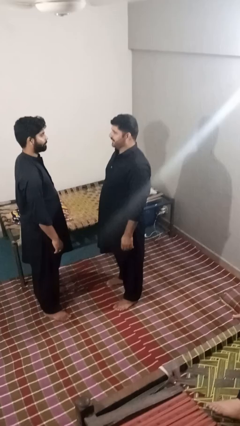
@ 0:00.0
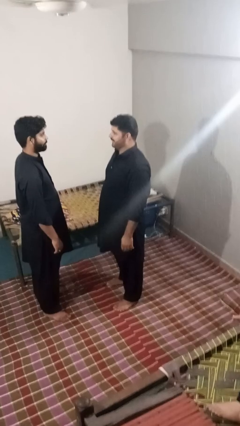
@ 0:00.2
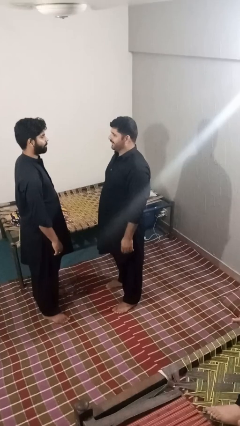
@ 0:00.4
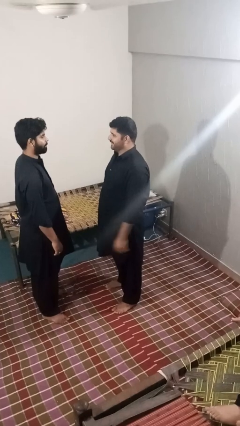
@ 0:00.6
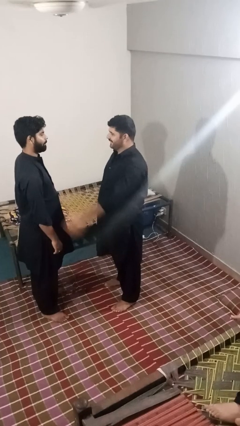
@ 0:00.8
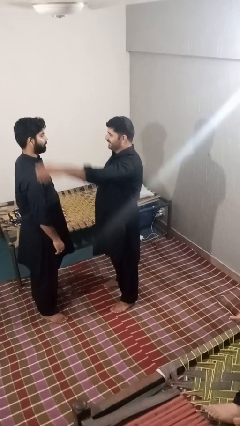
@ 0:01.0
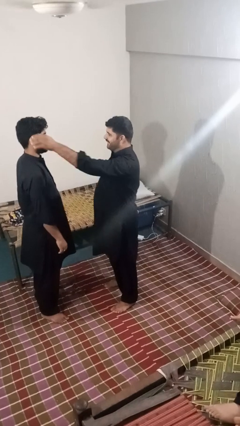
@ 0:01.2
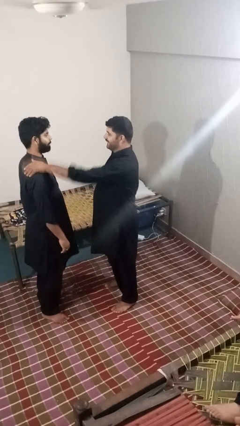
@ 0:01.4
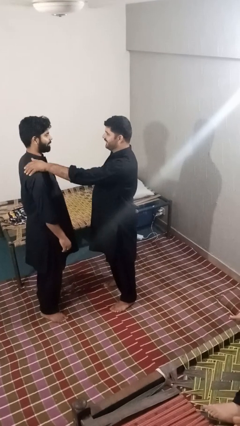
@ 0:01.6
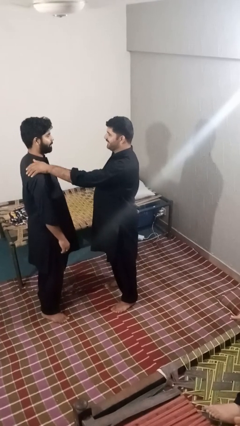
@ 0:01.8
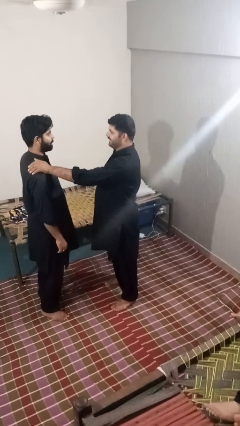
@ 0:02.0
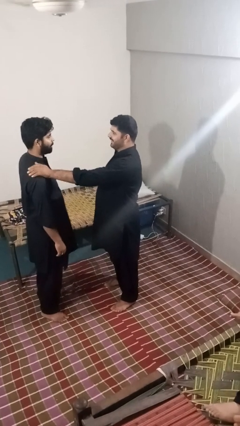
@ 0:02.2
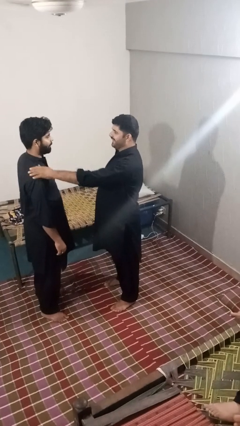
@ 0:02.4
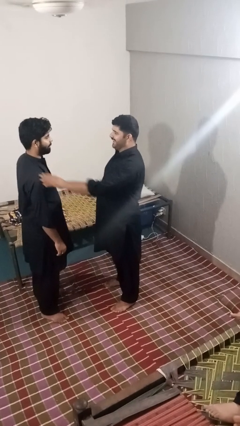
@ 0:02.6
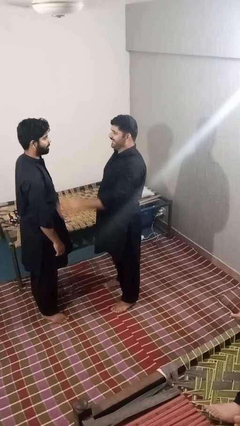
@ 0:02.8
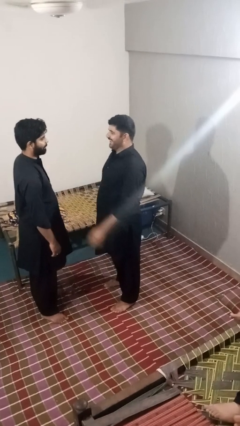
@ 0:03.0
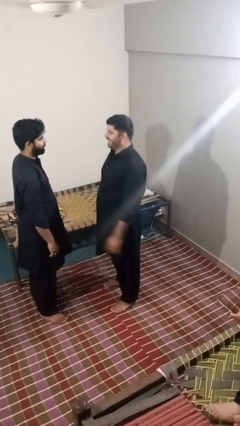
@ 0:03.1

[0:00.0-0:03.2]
person pounds shoulders of person

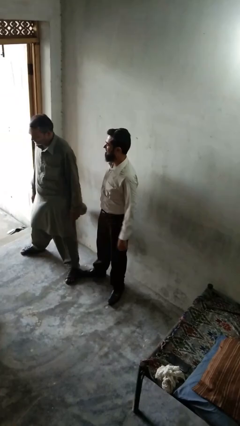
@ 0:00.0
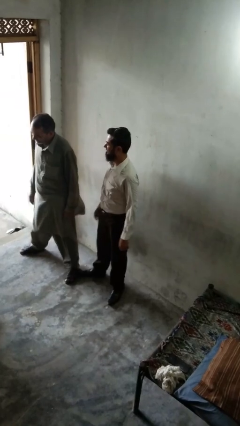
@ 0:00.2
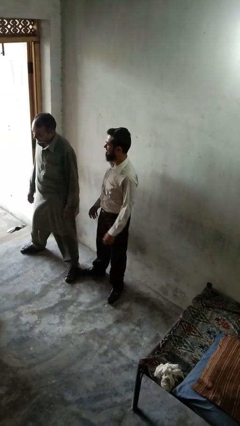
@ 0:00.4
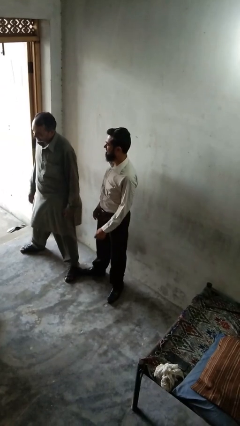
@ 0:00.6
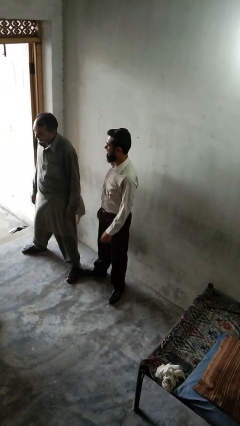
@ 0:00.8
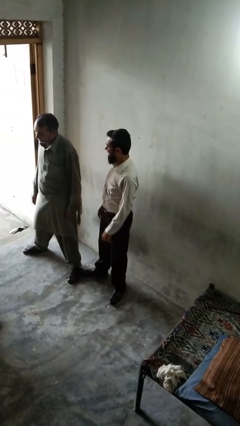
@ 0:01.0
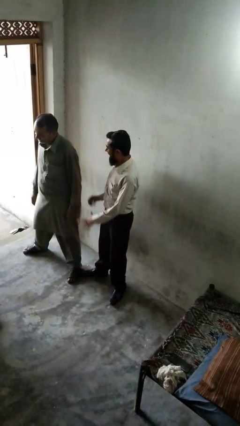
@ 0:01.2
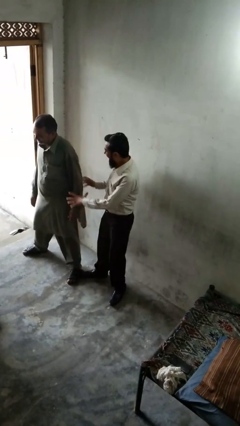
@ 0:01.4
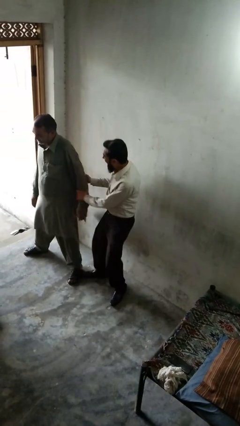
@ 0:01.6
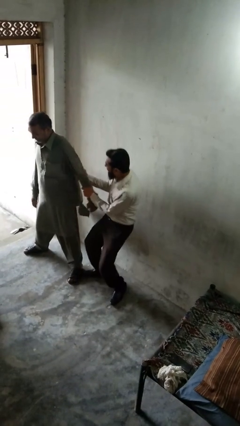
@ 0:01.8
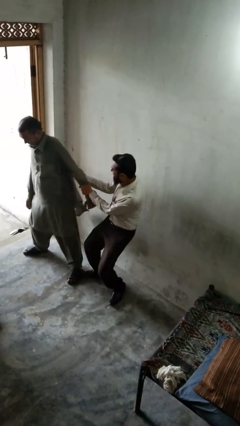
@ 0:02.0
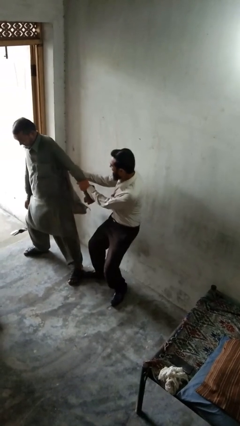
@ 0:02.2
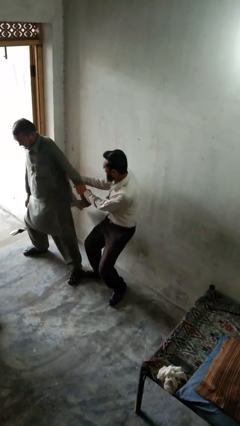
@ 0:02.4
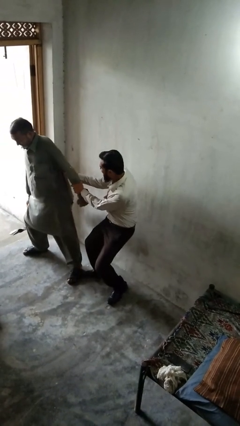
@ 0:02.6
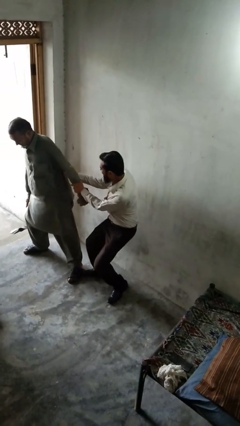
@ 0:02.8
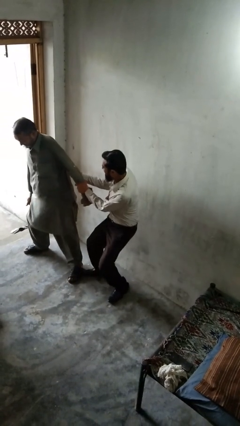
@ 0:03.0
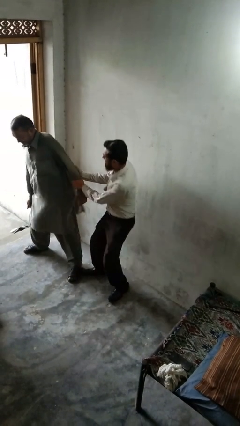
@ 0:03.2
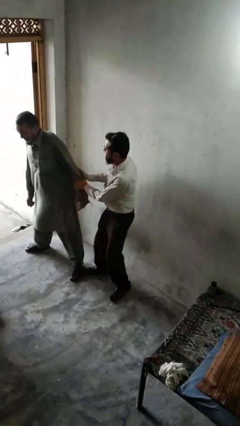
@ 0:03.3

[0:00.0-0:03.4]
person grabs person by forearm

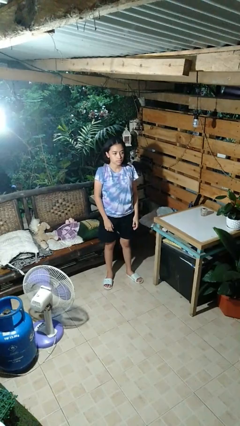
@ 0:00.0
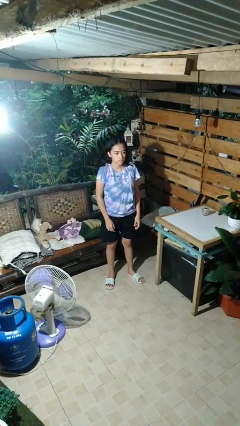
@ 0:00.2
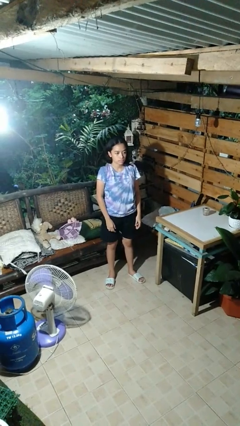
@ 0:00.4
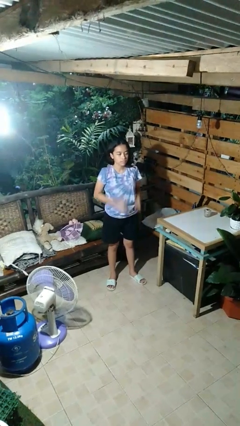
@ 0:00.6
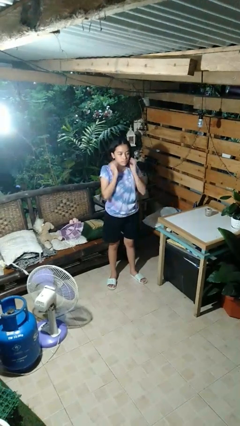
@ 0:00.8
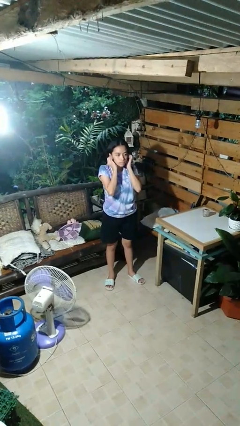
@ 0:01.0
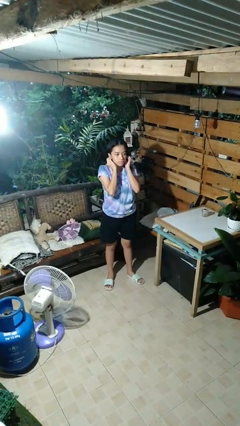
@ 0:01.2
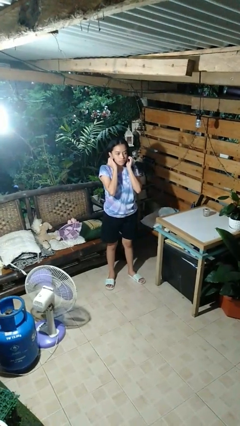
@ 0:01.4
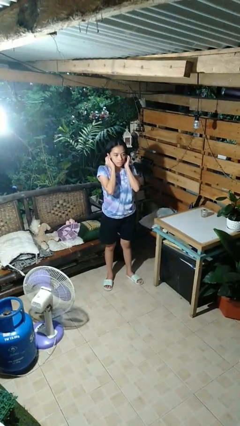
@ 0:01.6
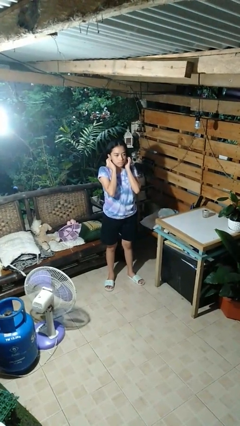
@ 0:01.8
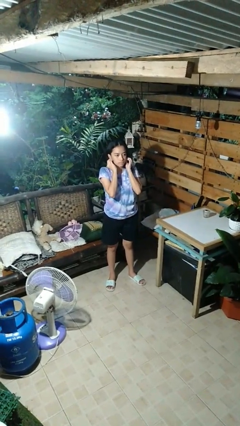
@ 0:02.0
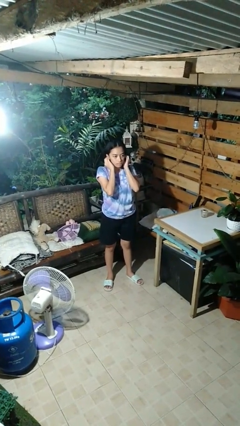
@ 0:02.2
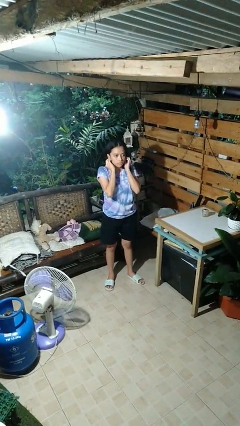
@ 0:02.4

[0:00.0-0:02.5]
person touches earlobe

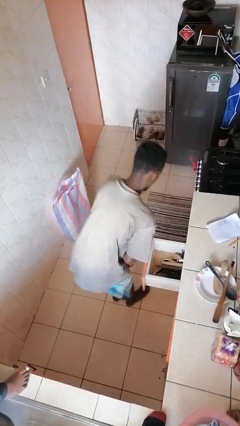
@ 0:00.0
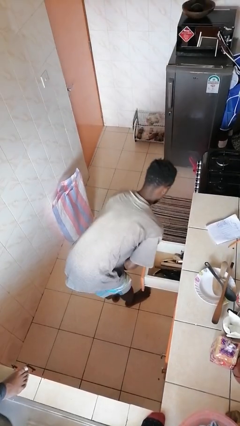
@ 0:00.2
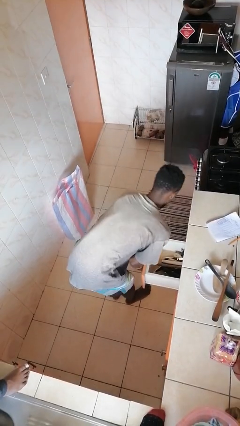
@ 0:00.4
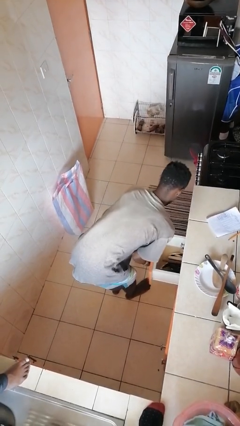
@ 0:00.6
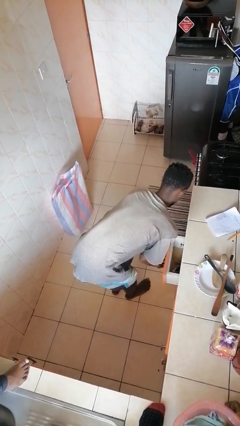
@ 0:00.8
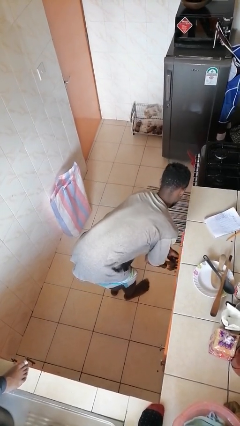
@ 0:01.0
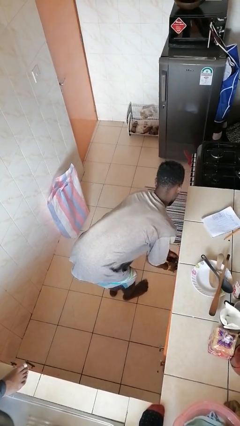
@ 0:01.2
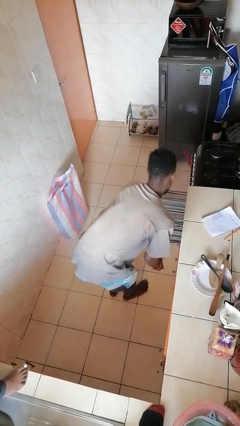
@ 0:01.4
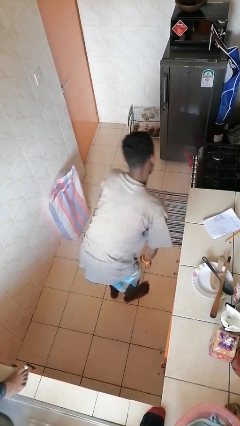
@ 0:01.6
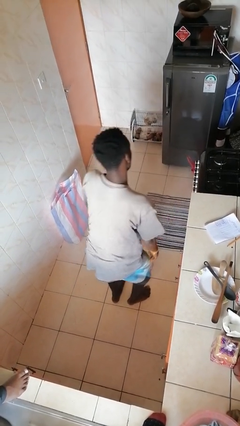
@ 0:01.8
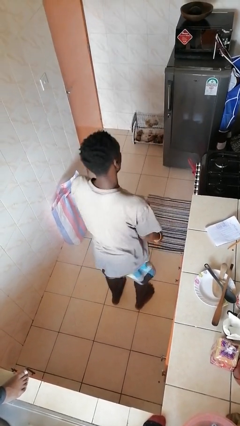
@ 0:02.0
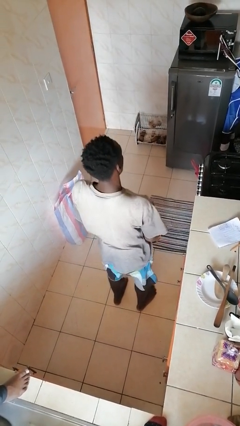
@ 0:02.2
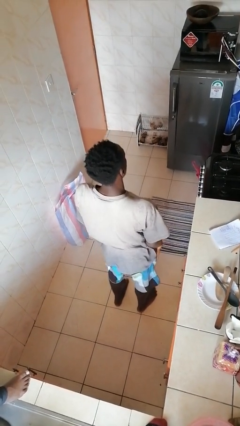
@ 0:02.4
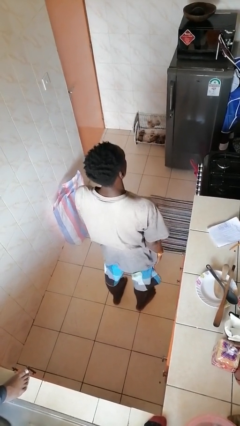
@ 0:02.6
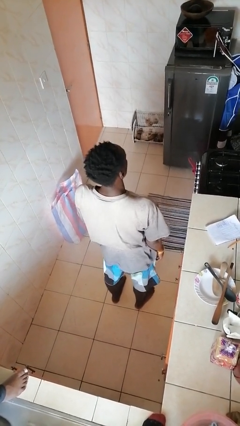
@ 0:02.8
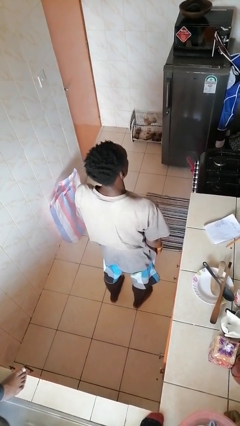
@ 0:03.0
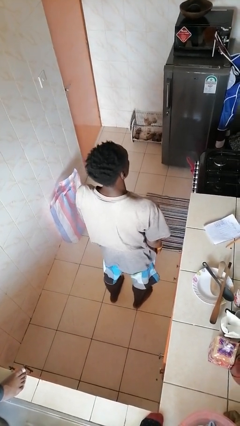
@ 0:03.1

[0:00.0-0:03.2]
person closes kitchen drawer

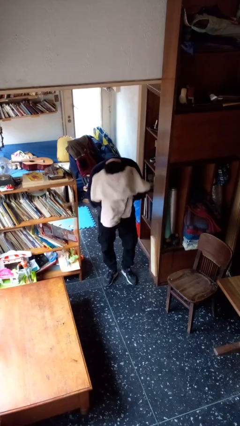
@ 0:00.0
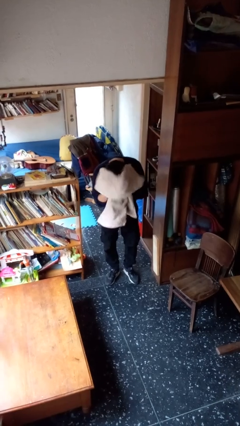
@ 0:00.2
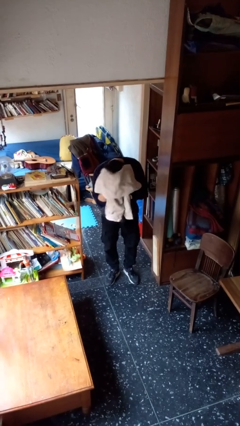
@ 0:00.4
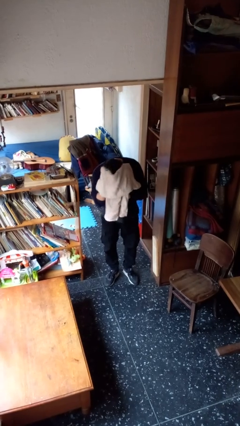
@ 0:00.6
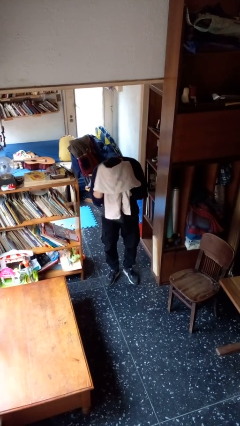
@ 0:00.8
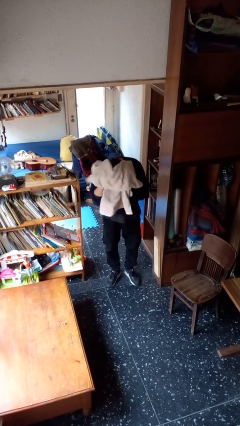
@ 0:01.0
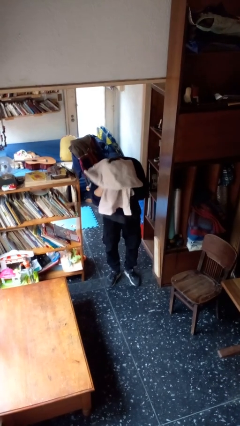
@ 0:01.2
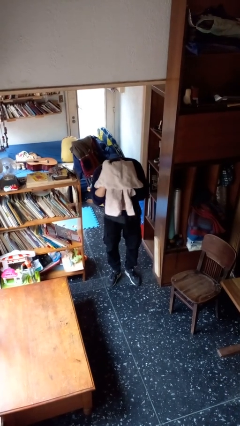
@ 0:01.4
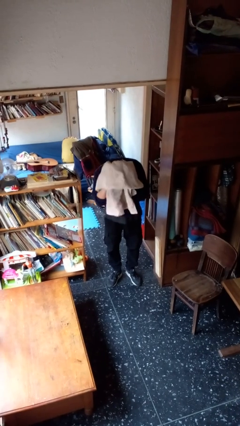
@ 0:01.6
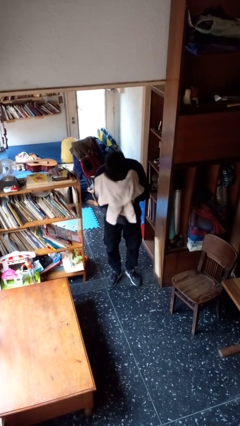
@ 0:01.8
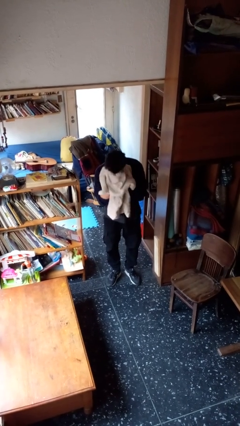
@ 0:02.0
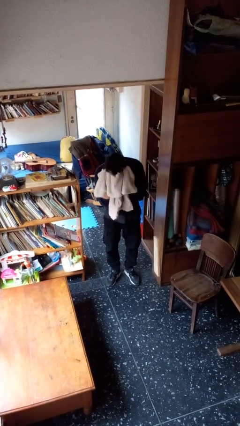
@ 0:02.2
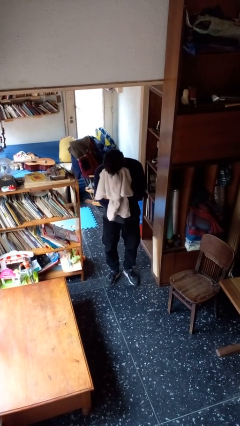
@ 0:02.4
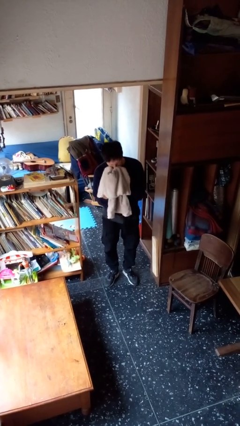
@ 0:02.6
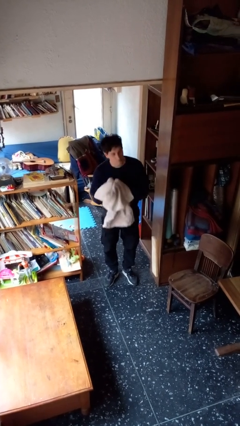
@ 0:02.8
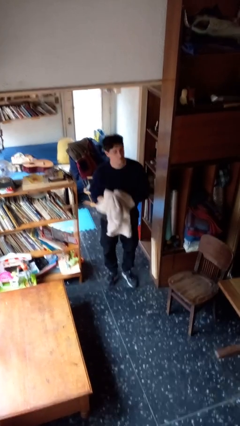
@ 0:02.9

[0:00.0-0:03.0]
person dries hair with towel

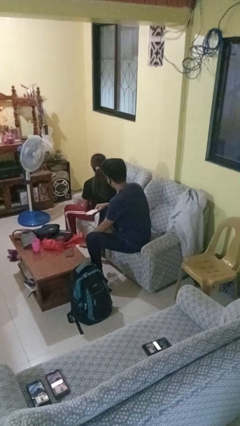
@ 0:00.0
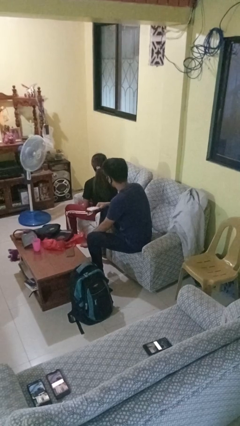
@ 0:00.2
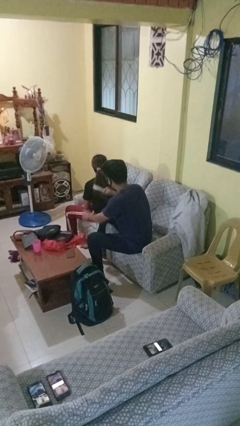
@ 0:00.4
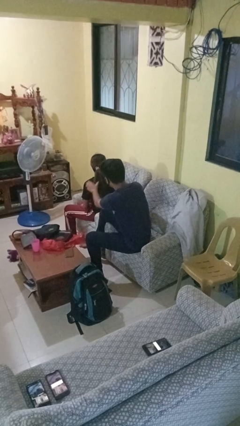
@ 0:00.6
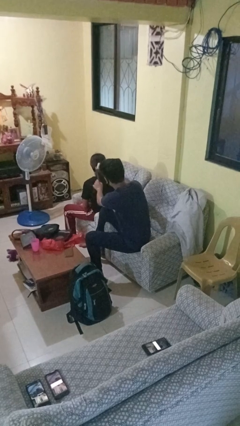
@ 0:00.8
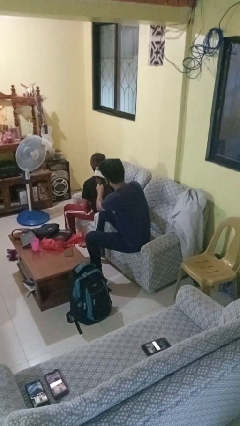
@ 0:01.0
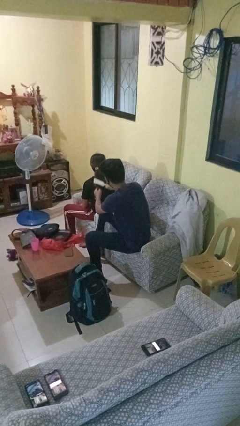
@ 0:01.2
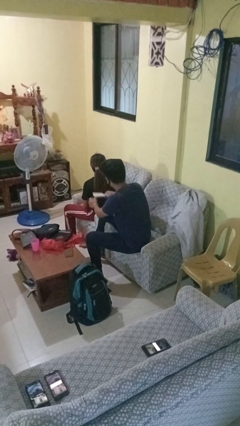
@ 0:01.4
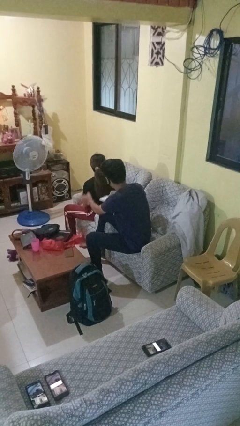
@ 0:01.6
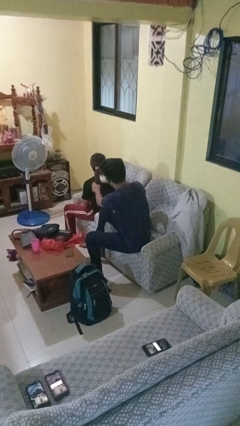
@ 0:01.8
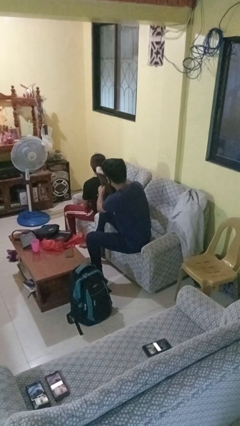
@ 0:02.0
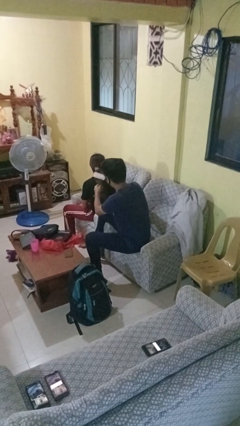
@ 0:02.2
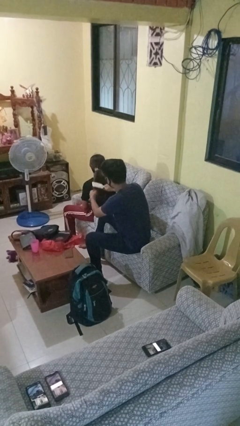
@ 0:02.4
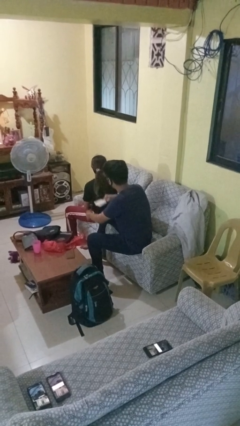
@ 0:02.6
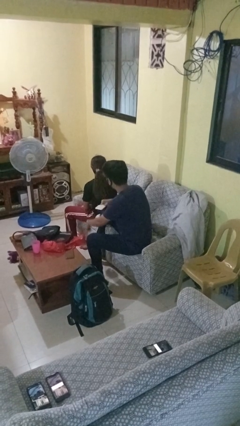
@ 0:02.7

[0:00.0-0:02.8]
person brushes hair of person
